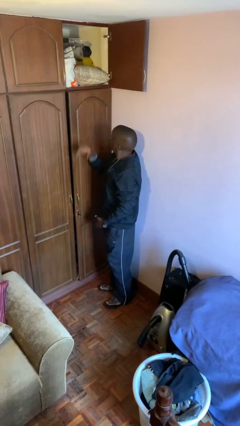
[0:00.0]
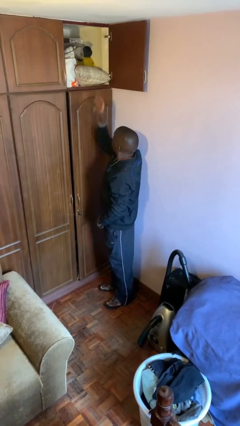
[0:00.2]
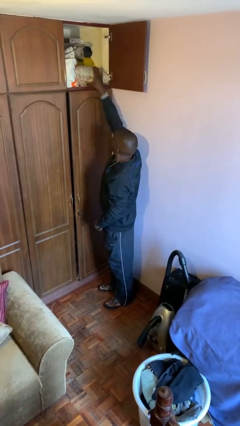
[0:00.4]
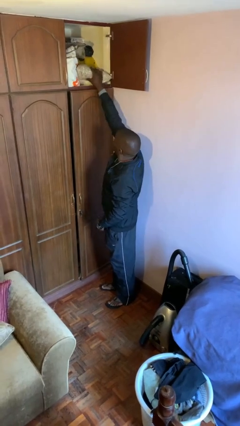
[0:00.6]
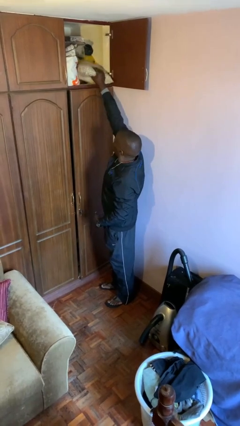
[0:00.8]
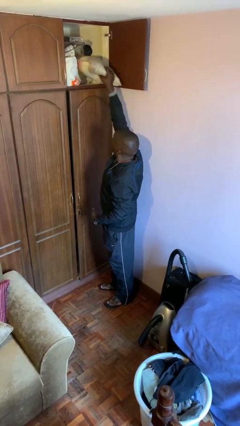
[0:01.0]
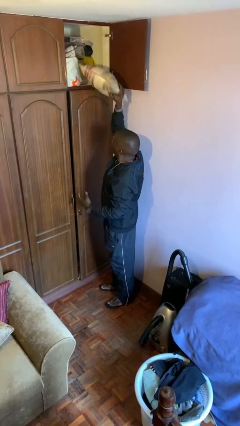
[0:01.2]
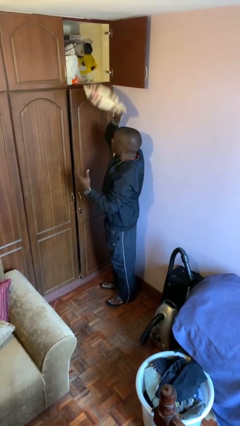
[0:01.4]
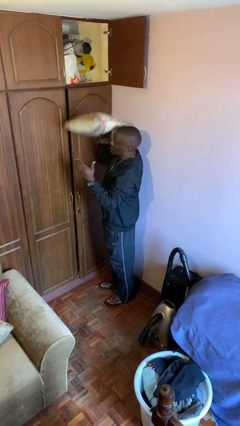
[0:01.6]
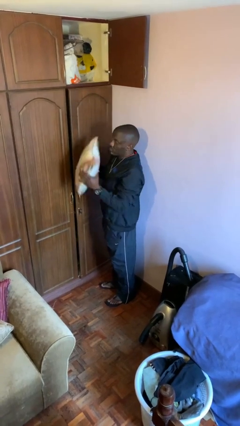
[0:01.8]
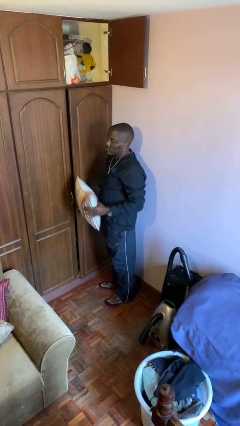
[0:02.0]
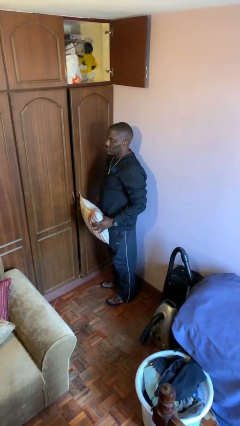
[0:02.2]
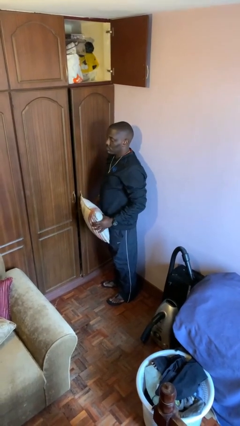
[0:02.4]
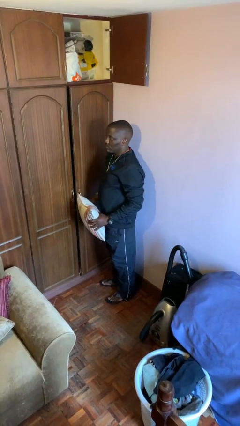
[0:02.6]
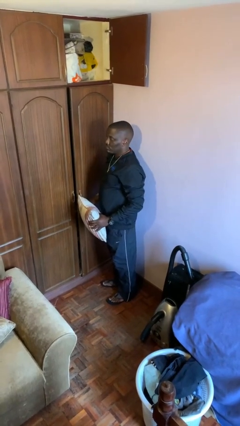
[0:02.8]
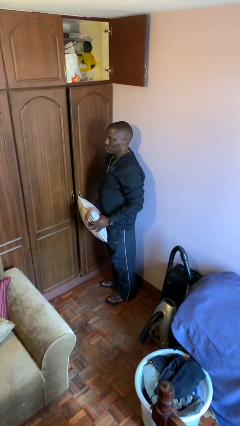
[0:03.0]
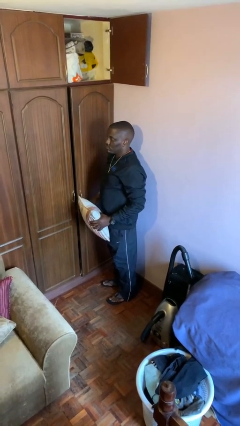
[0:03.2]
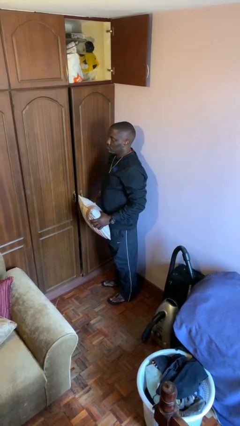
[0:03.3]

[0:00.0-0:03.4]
person picks up object from shelf

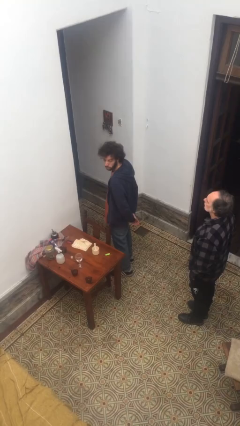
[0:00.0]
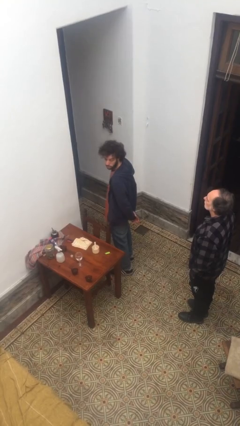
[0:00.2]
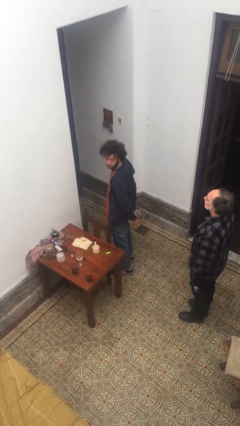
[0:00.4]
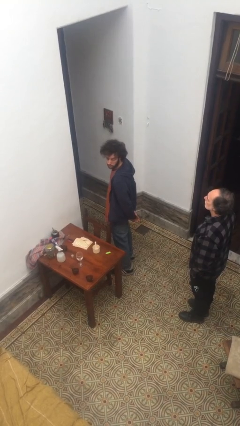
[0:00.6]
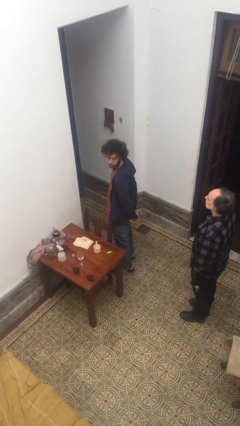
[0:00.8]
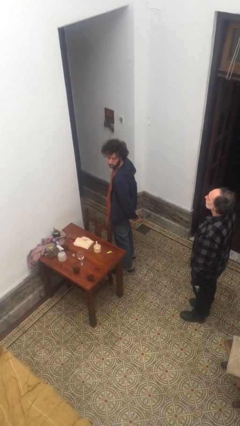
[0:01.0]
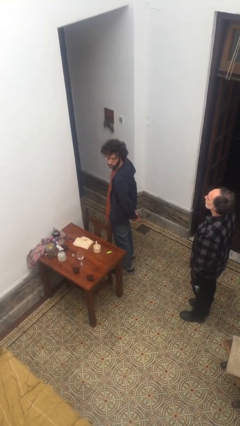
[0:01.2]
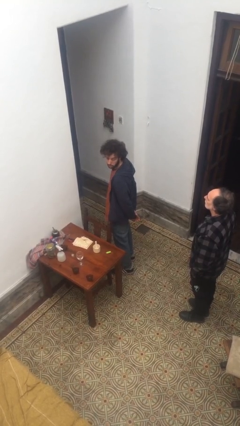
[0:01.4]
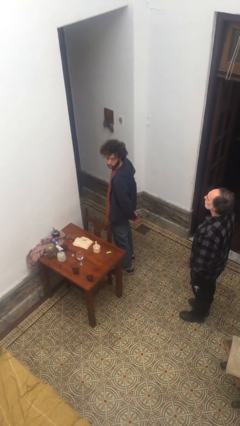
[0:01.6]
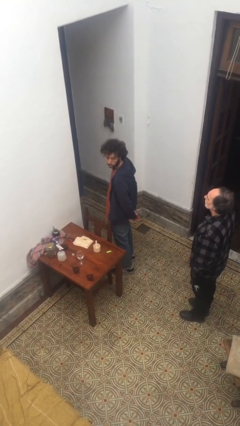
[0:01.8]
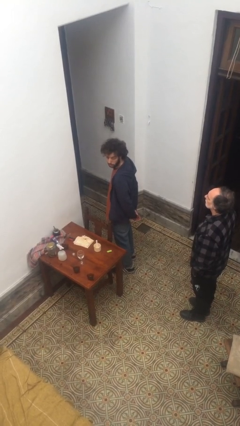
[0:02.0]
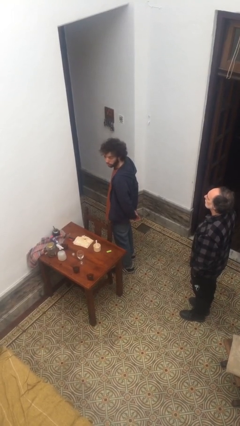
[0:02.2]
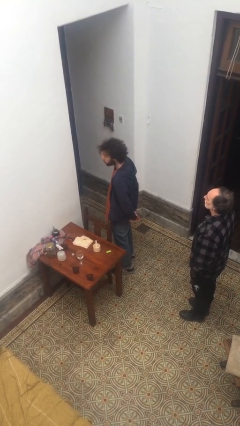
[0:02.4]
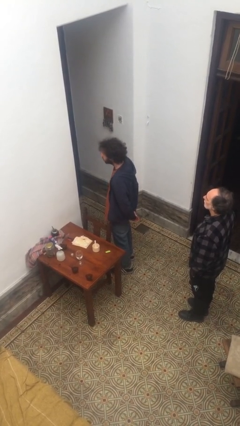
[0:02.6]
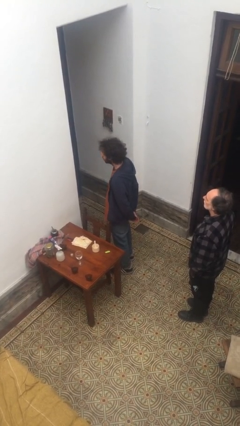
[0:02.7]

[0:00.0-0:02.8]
person looks over shoulder

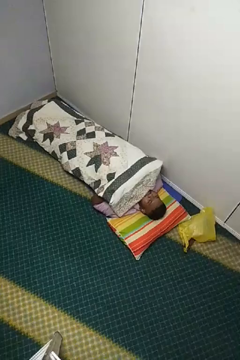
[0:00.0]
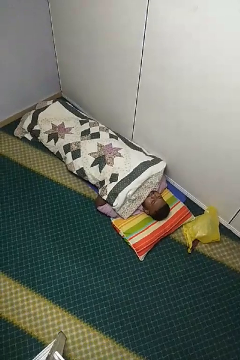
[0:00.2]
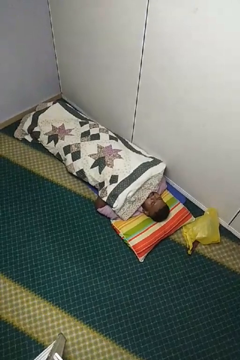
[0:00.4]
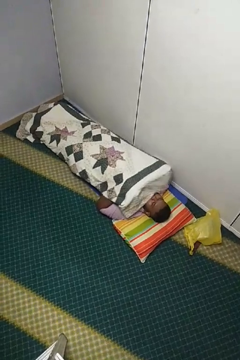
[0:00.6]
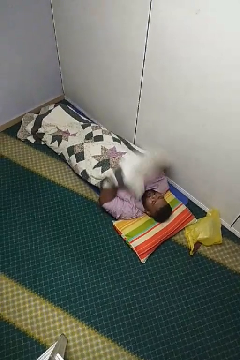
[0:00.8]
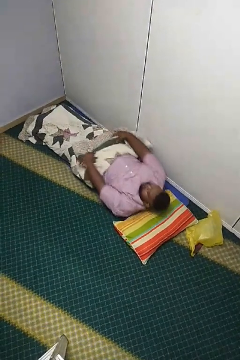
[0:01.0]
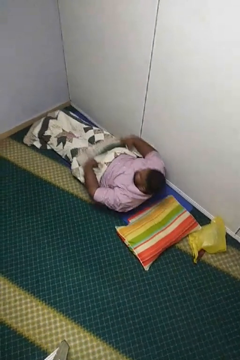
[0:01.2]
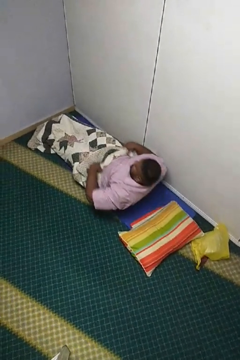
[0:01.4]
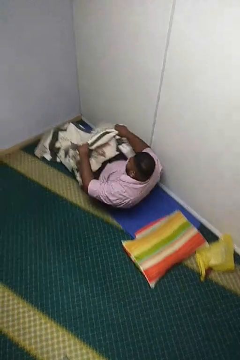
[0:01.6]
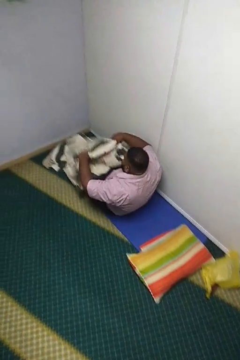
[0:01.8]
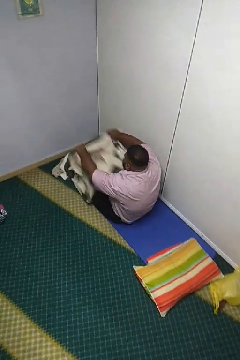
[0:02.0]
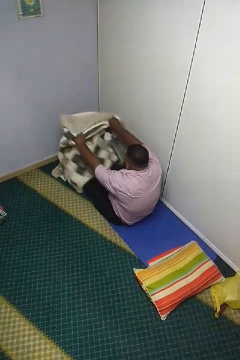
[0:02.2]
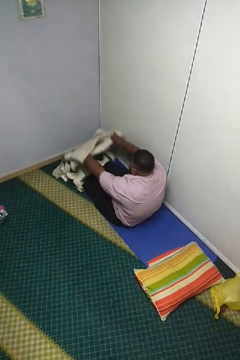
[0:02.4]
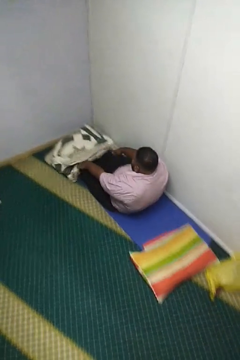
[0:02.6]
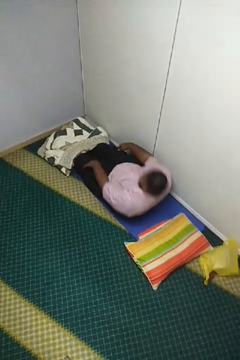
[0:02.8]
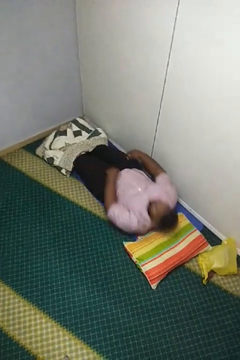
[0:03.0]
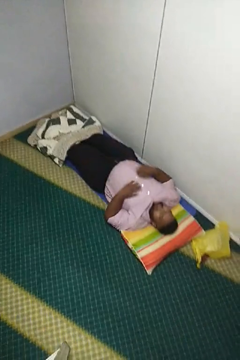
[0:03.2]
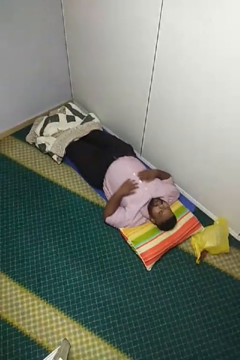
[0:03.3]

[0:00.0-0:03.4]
person uncovers with bedsheets

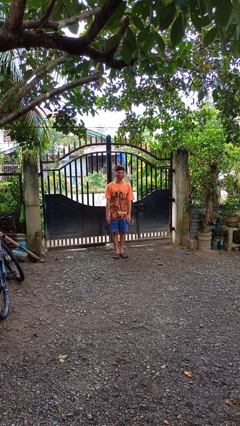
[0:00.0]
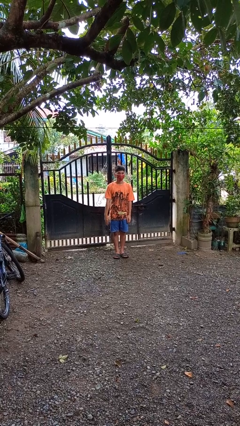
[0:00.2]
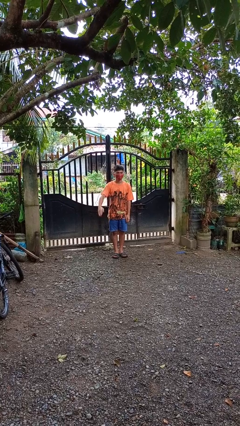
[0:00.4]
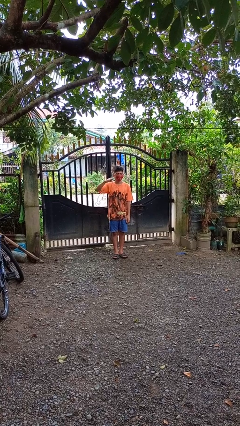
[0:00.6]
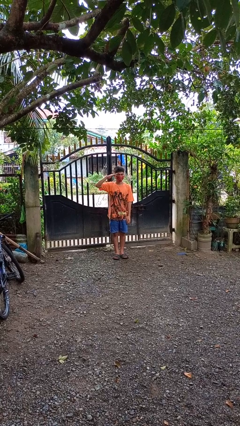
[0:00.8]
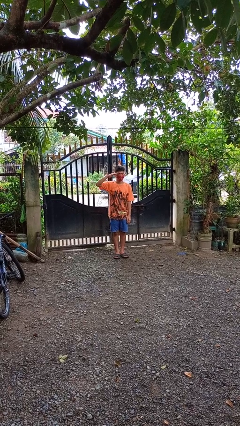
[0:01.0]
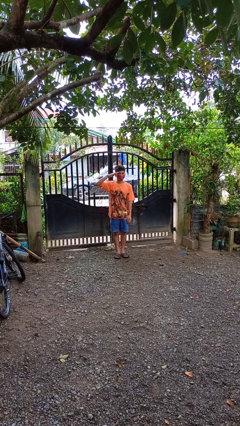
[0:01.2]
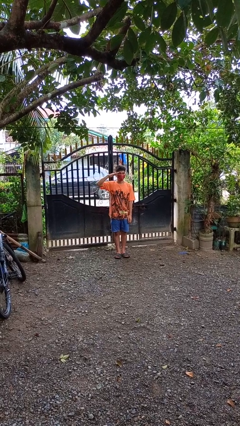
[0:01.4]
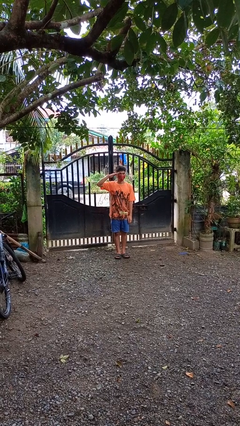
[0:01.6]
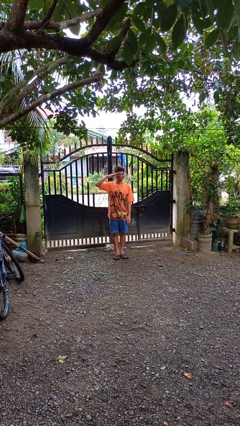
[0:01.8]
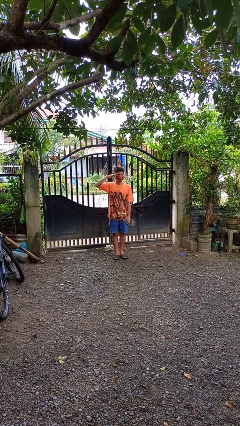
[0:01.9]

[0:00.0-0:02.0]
person salutes

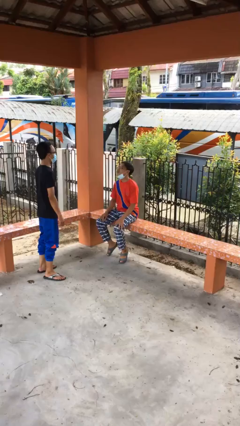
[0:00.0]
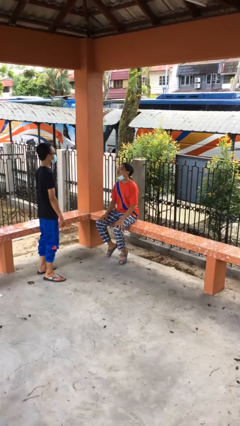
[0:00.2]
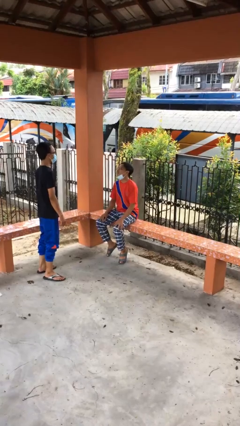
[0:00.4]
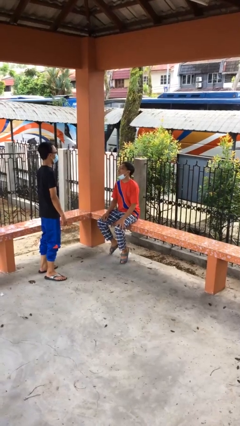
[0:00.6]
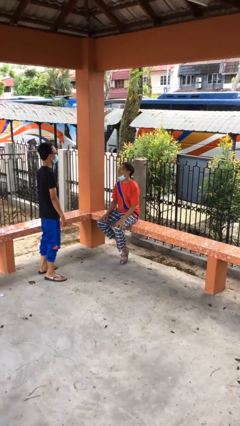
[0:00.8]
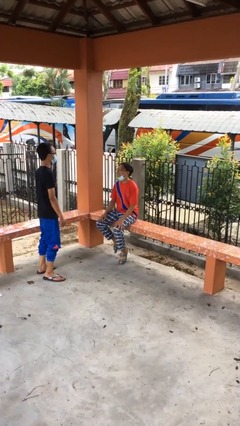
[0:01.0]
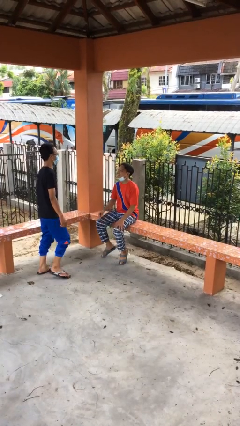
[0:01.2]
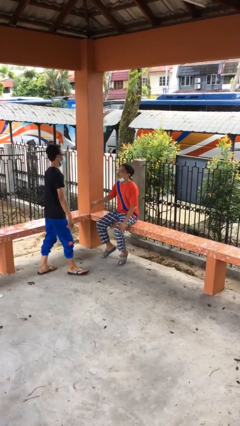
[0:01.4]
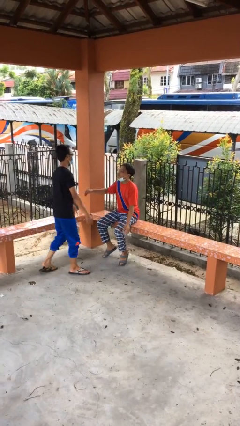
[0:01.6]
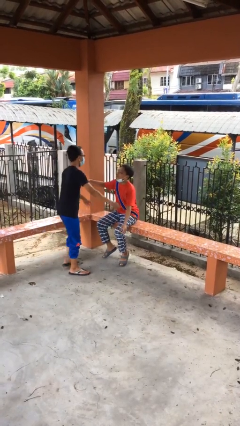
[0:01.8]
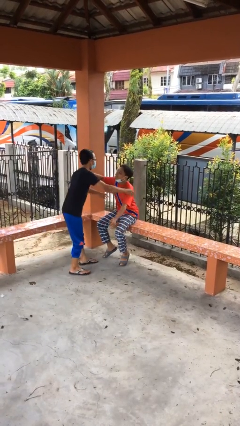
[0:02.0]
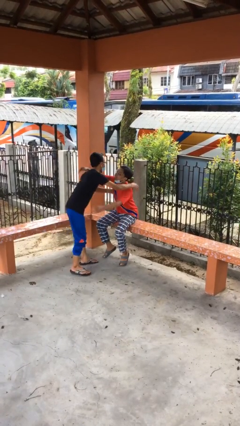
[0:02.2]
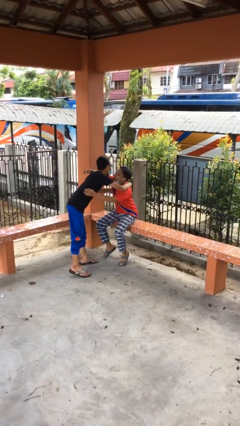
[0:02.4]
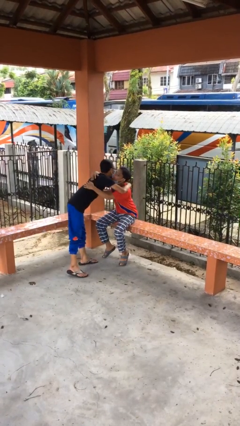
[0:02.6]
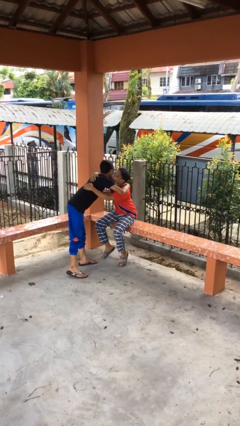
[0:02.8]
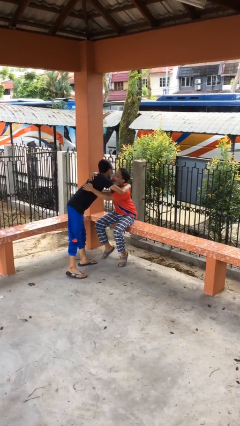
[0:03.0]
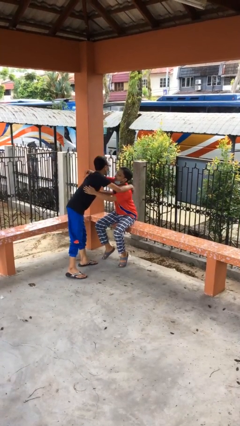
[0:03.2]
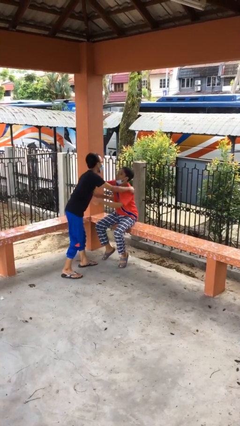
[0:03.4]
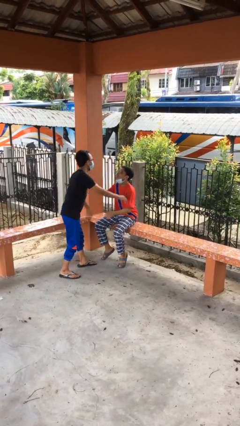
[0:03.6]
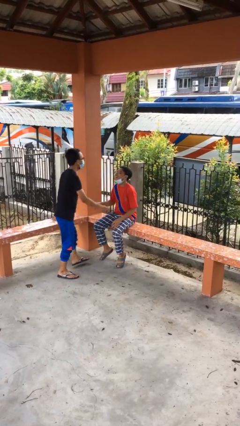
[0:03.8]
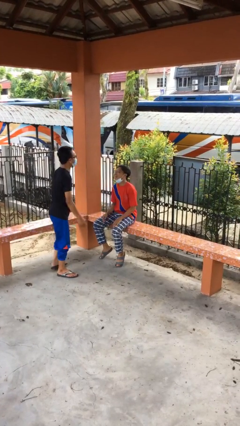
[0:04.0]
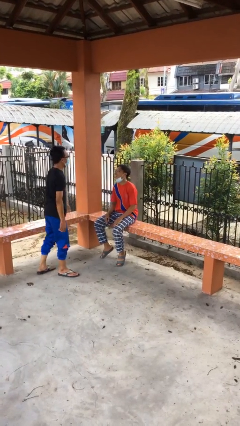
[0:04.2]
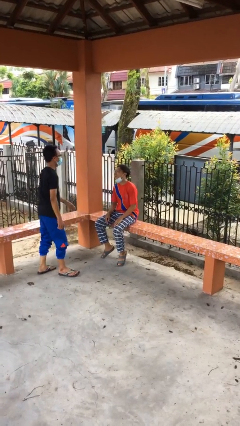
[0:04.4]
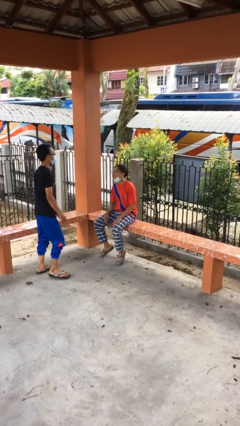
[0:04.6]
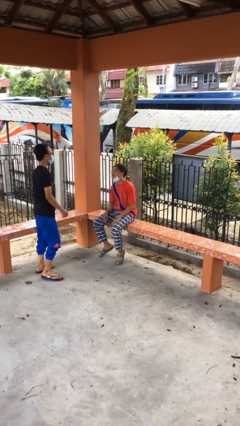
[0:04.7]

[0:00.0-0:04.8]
person embraces person

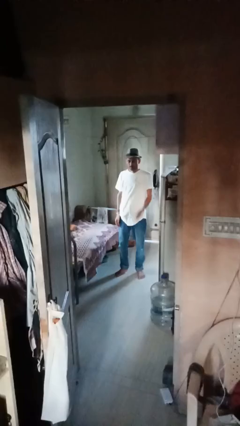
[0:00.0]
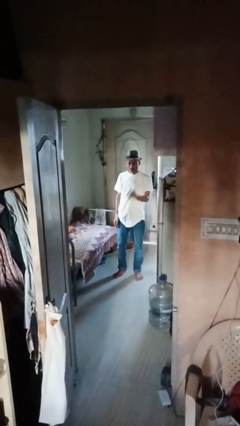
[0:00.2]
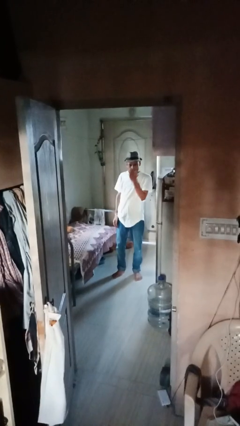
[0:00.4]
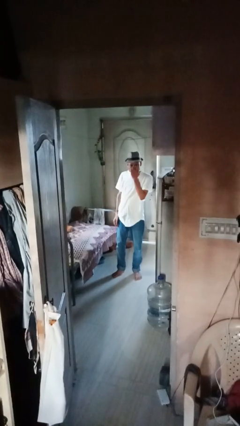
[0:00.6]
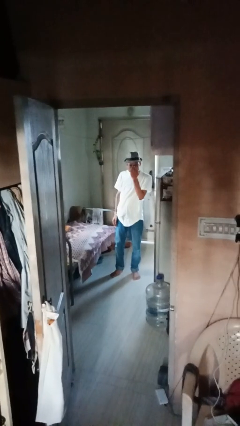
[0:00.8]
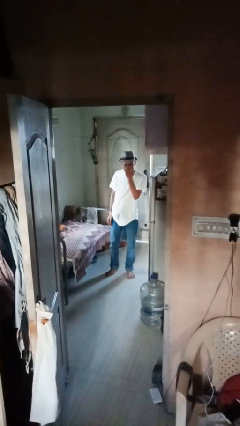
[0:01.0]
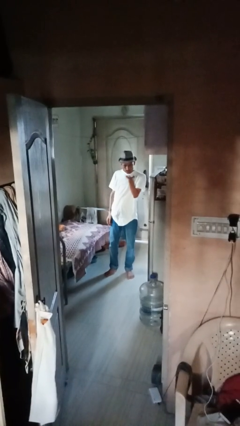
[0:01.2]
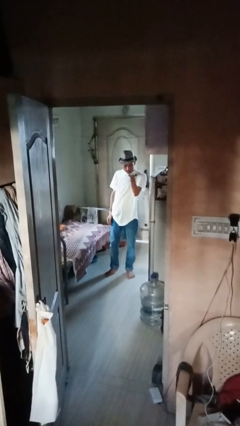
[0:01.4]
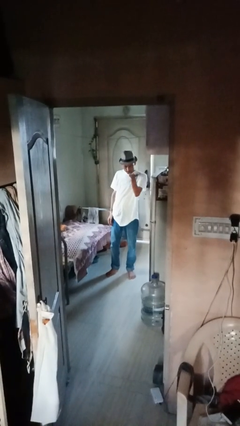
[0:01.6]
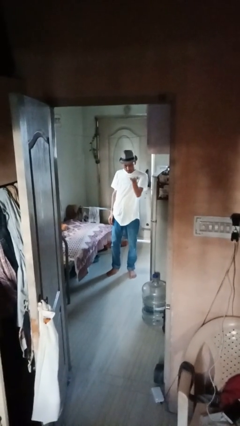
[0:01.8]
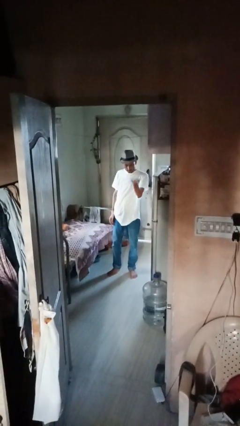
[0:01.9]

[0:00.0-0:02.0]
person gestures blow kiss
